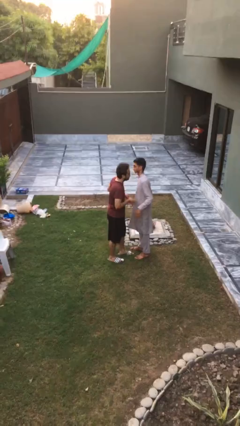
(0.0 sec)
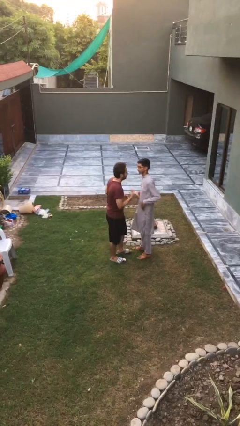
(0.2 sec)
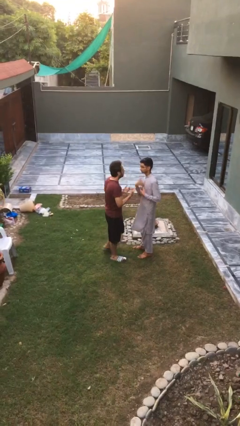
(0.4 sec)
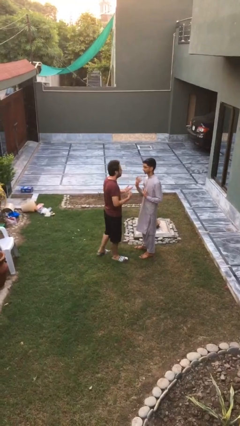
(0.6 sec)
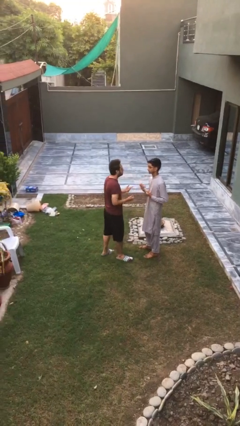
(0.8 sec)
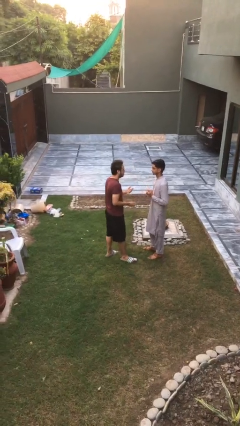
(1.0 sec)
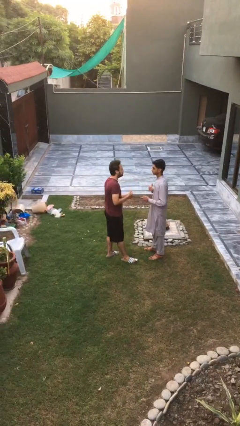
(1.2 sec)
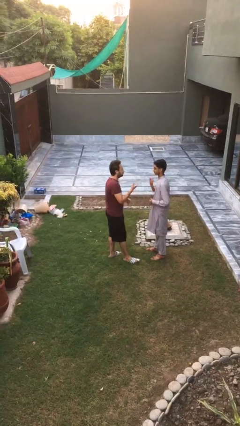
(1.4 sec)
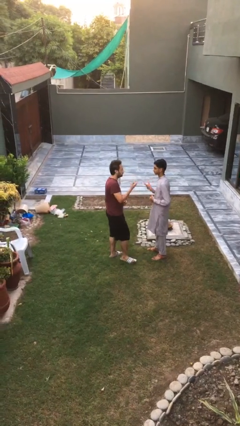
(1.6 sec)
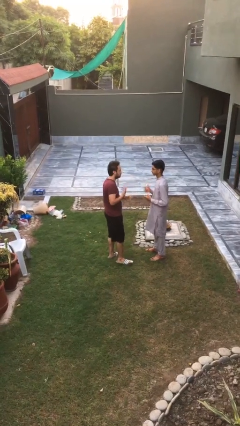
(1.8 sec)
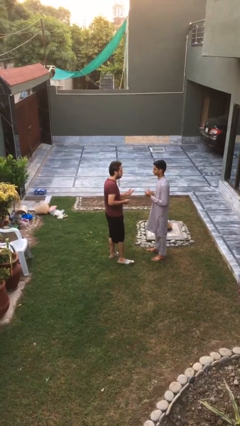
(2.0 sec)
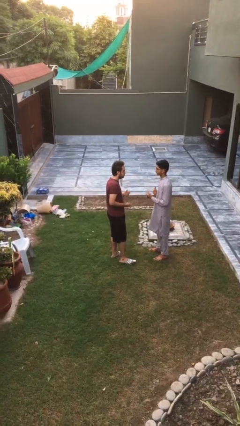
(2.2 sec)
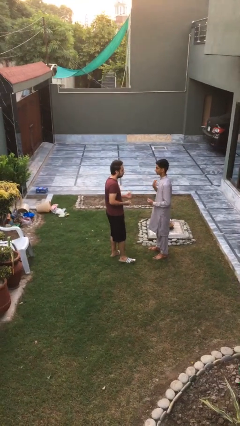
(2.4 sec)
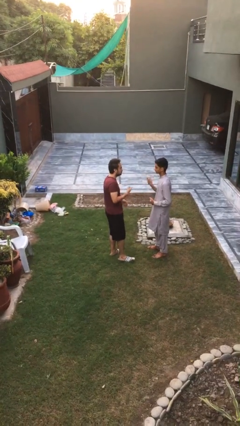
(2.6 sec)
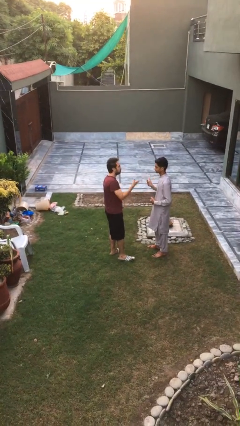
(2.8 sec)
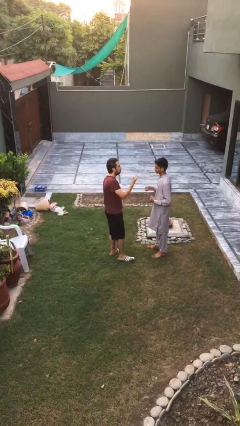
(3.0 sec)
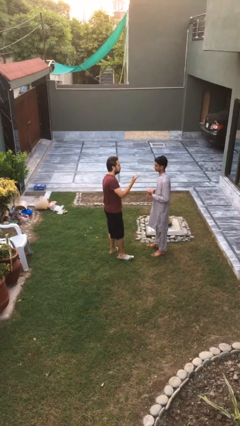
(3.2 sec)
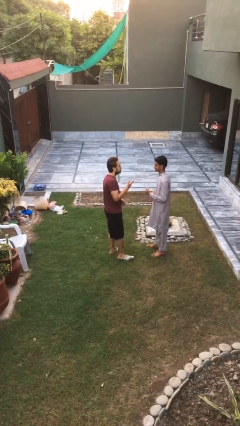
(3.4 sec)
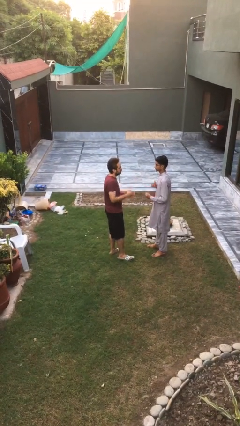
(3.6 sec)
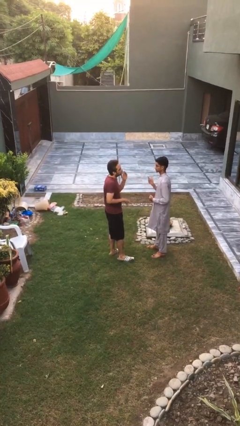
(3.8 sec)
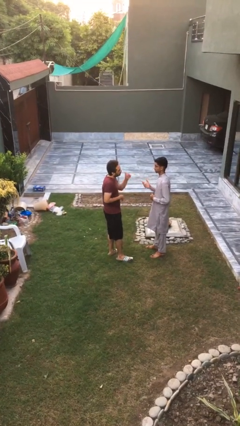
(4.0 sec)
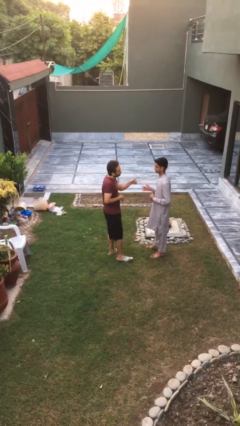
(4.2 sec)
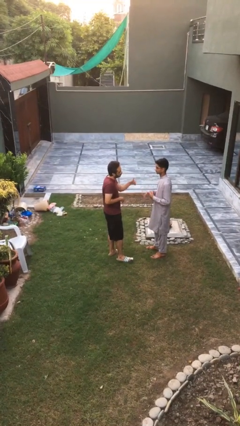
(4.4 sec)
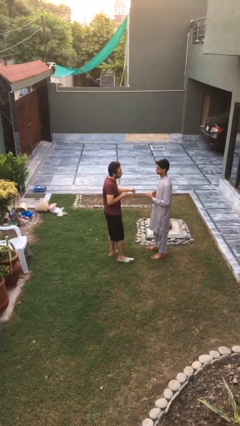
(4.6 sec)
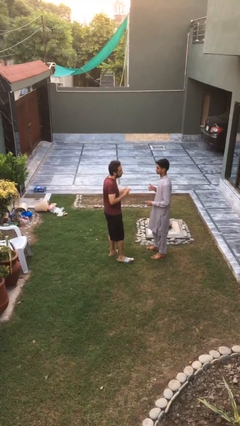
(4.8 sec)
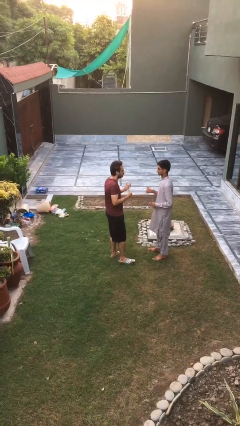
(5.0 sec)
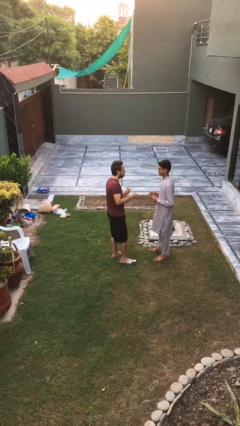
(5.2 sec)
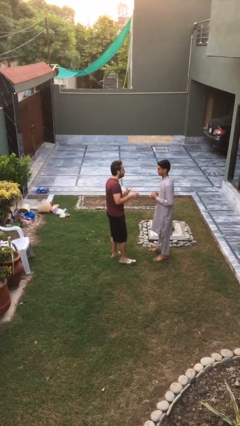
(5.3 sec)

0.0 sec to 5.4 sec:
person talks to person

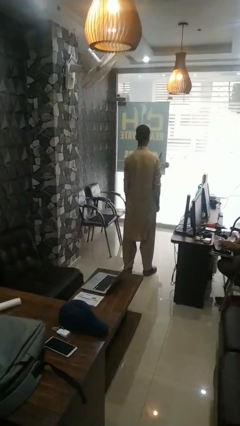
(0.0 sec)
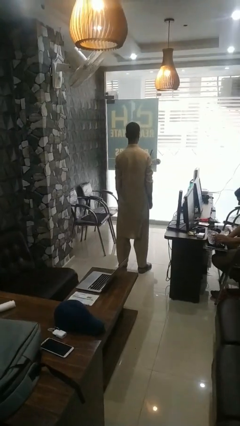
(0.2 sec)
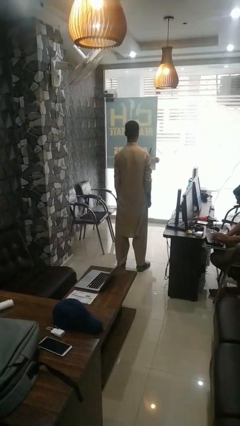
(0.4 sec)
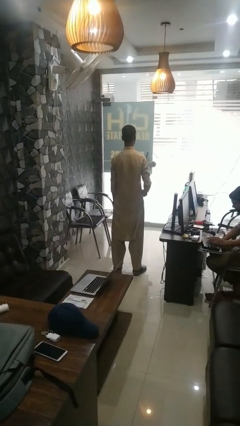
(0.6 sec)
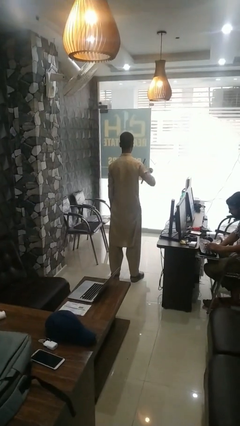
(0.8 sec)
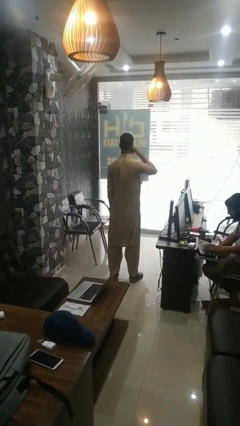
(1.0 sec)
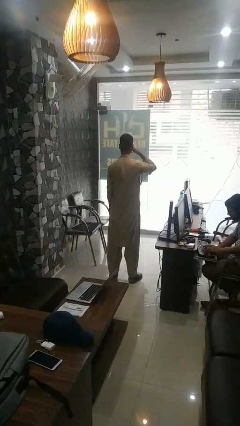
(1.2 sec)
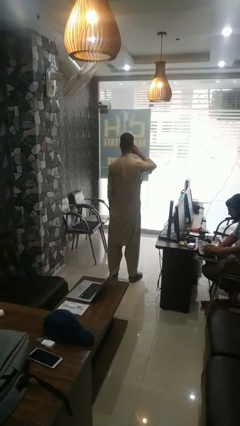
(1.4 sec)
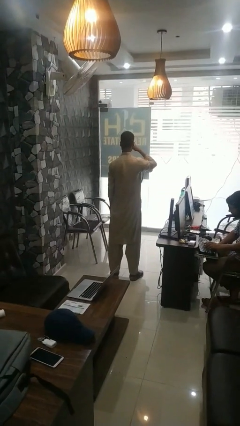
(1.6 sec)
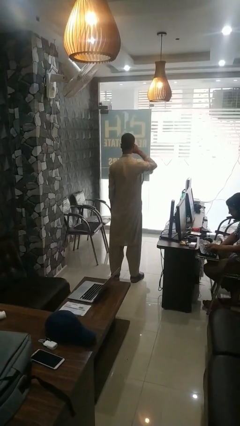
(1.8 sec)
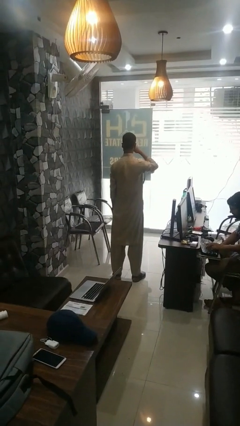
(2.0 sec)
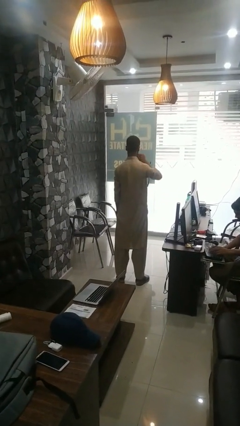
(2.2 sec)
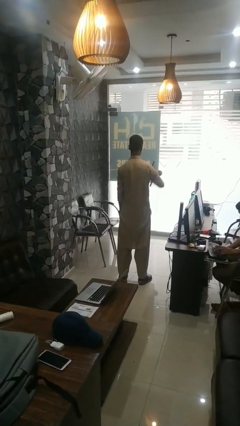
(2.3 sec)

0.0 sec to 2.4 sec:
person rubs eyes

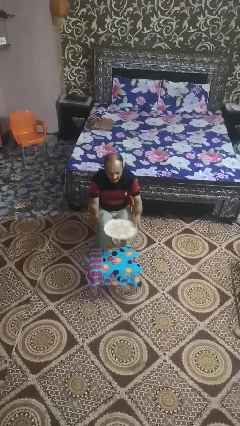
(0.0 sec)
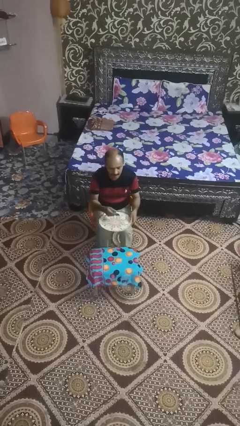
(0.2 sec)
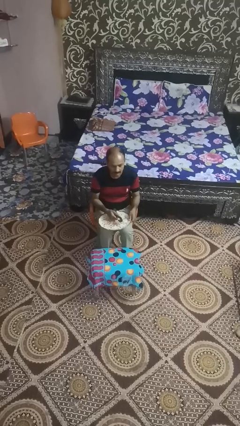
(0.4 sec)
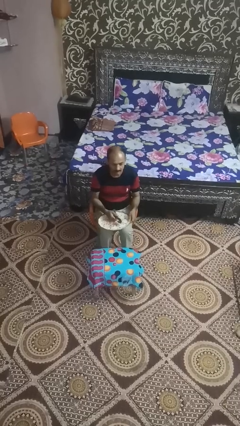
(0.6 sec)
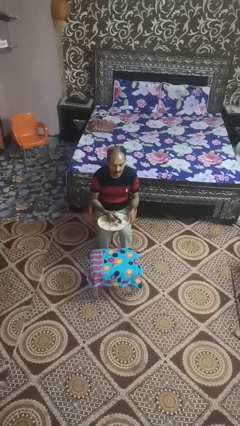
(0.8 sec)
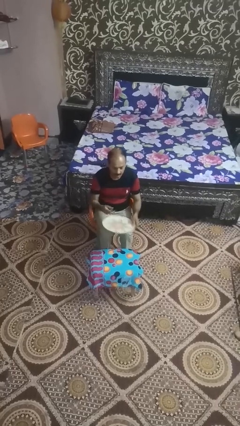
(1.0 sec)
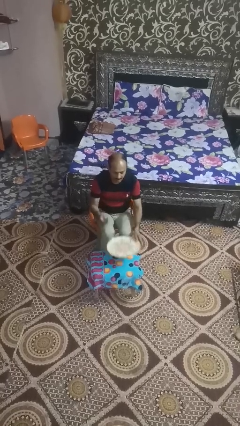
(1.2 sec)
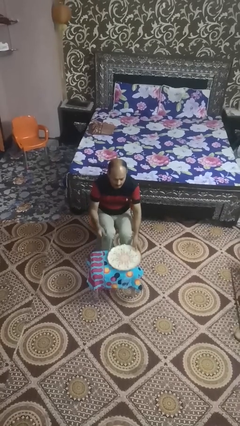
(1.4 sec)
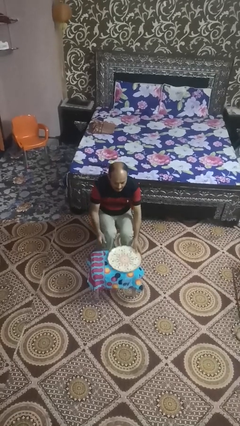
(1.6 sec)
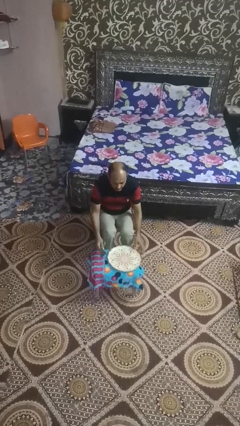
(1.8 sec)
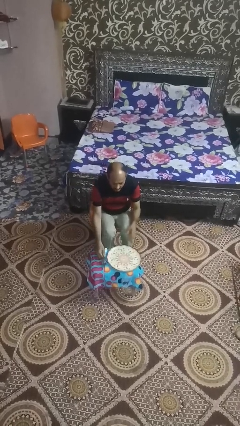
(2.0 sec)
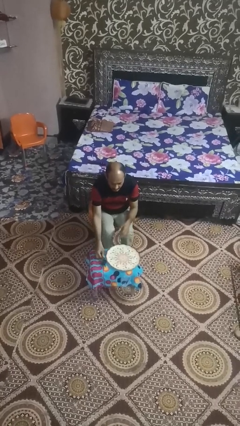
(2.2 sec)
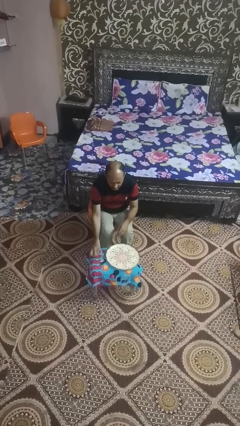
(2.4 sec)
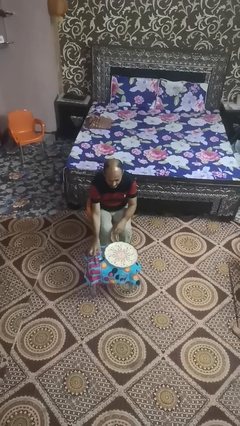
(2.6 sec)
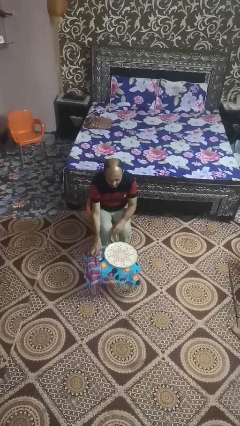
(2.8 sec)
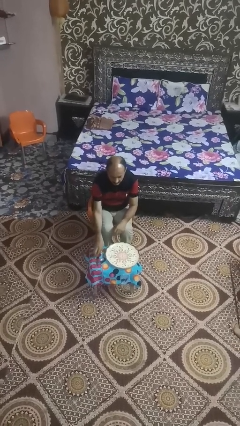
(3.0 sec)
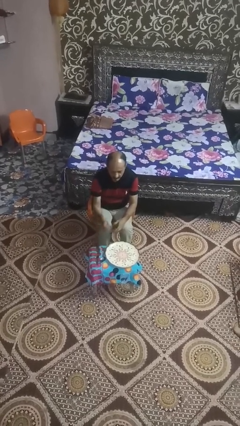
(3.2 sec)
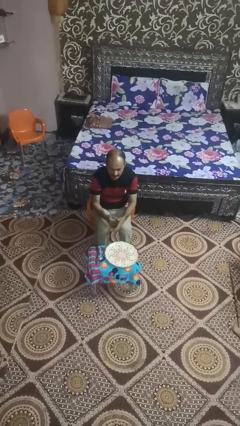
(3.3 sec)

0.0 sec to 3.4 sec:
person sets table

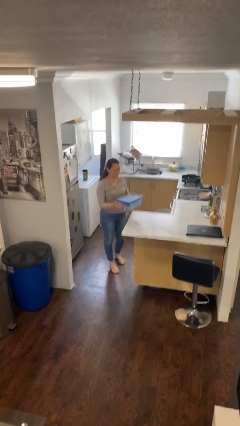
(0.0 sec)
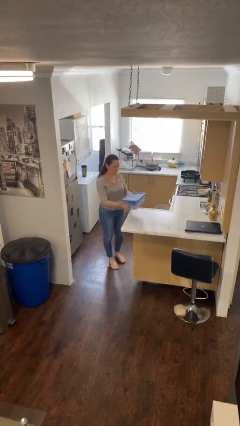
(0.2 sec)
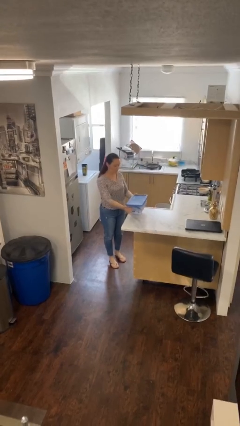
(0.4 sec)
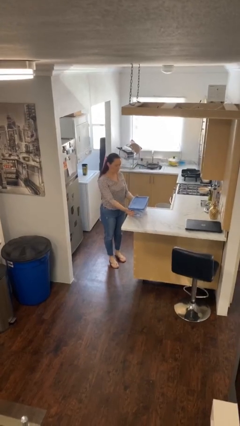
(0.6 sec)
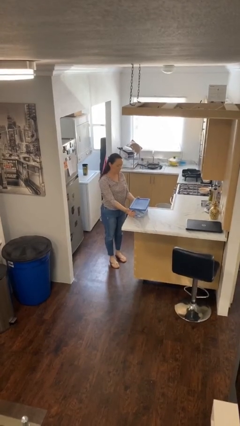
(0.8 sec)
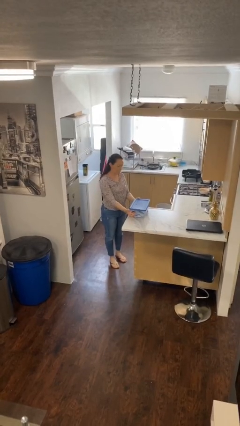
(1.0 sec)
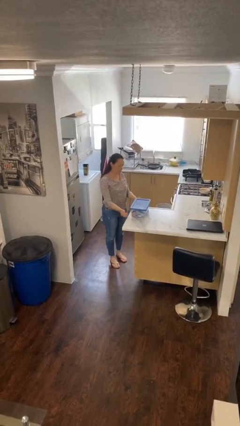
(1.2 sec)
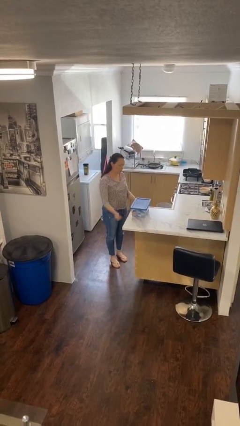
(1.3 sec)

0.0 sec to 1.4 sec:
person puts down object on table

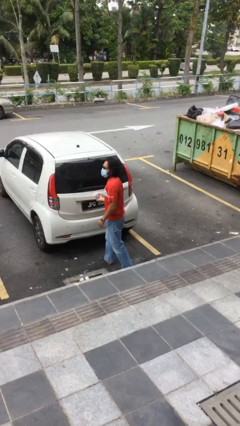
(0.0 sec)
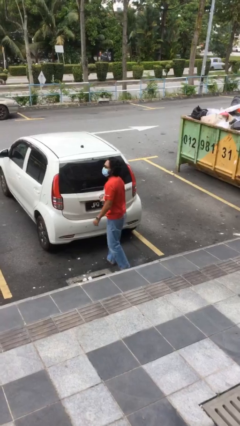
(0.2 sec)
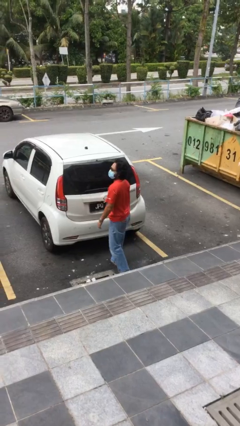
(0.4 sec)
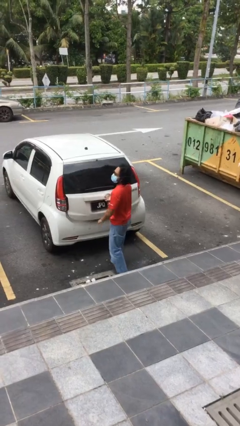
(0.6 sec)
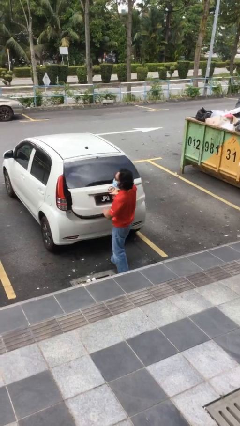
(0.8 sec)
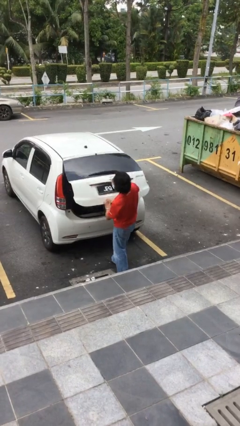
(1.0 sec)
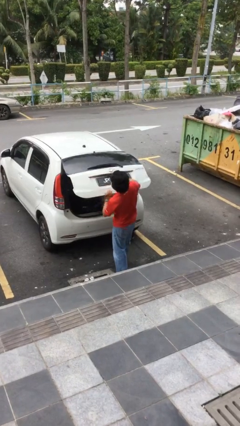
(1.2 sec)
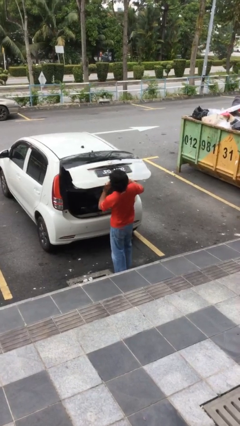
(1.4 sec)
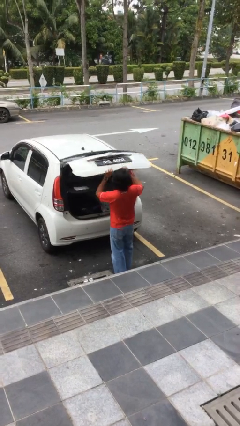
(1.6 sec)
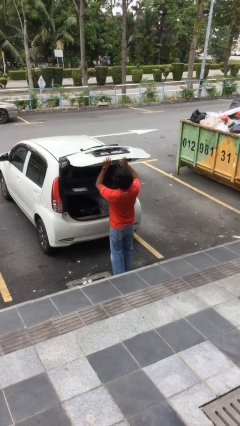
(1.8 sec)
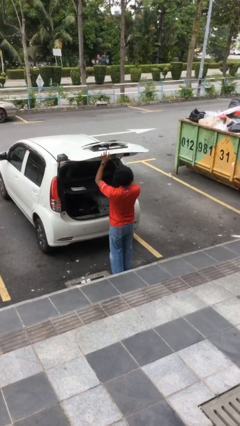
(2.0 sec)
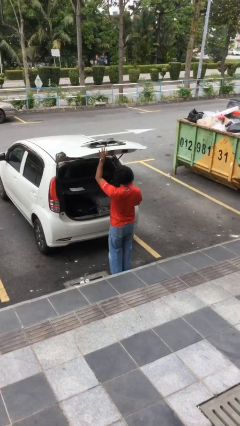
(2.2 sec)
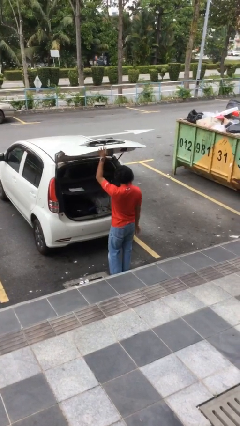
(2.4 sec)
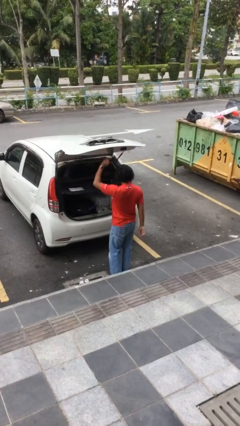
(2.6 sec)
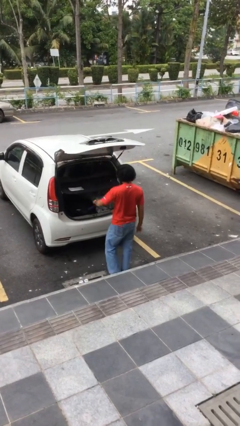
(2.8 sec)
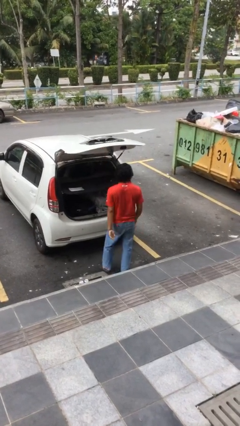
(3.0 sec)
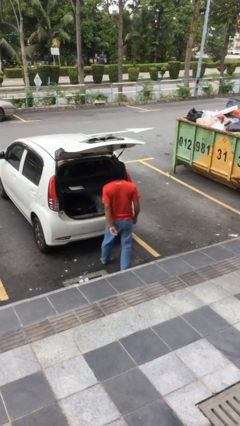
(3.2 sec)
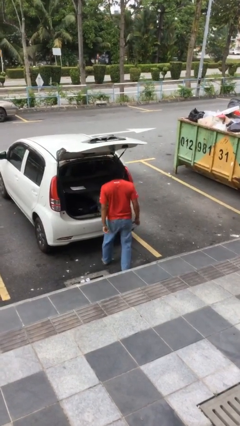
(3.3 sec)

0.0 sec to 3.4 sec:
person opens car trunk

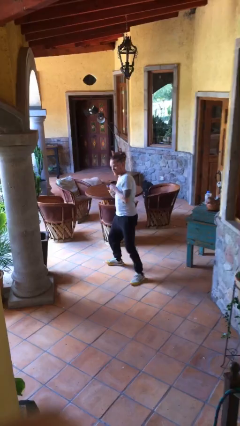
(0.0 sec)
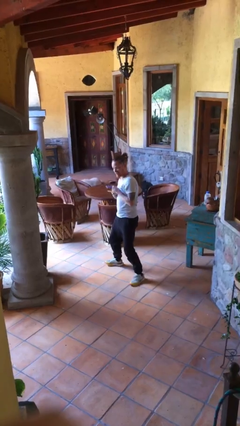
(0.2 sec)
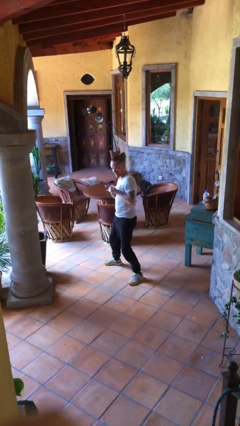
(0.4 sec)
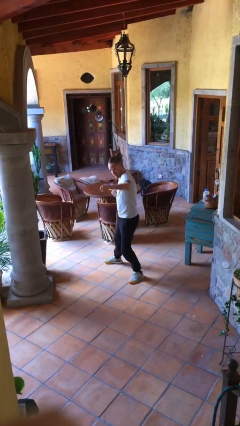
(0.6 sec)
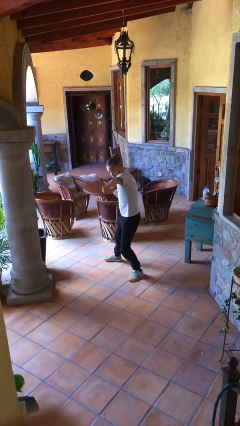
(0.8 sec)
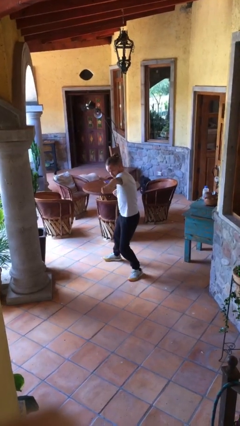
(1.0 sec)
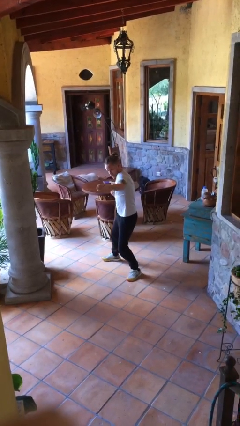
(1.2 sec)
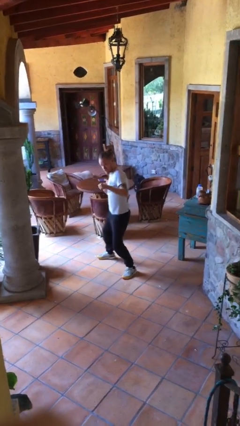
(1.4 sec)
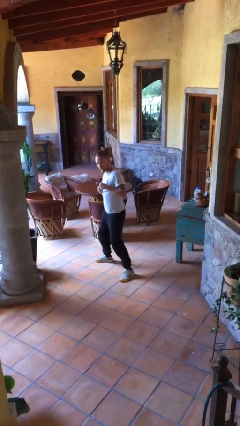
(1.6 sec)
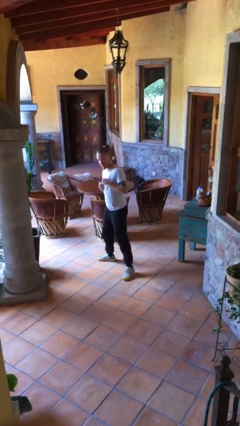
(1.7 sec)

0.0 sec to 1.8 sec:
person karate chop
